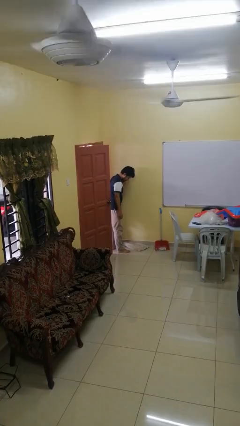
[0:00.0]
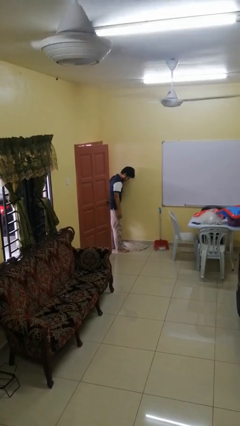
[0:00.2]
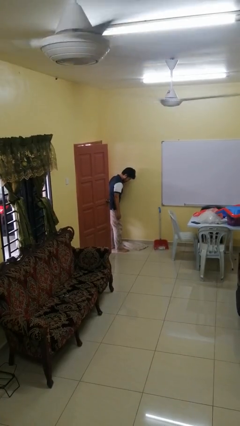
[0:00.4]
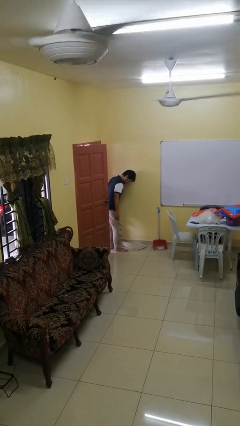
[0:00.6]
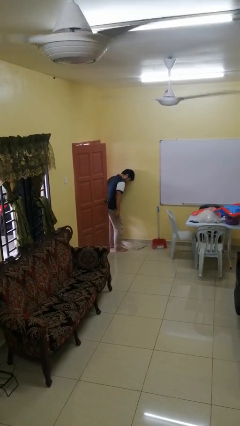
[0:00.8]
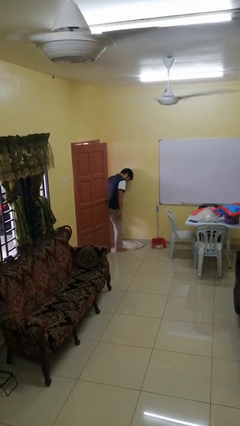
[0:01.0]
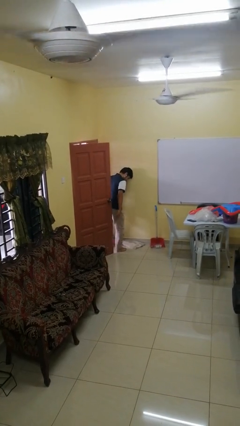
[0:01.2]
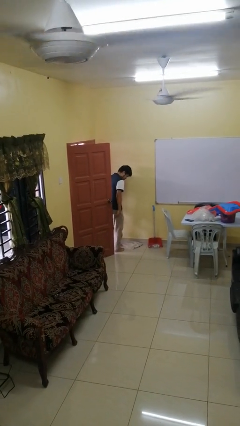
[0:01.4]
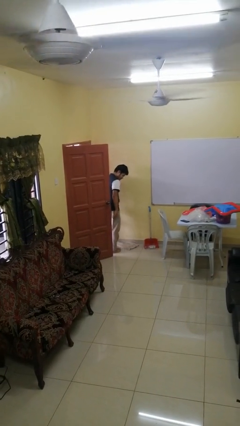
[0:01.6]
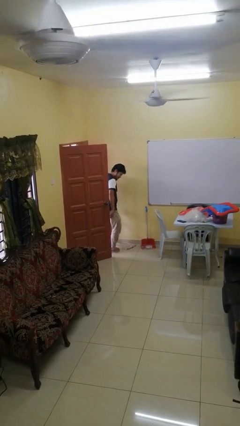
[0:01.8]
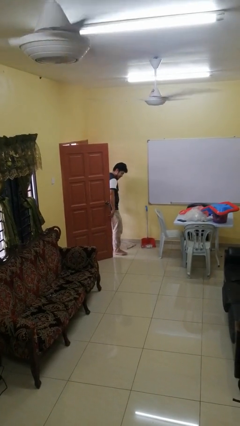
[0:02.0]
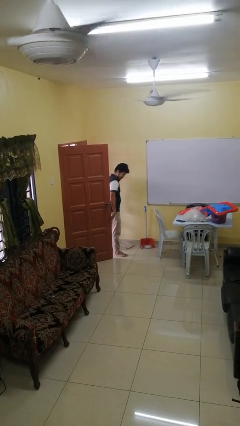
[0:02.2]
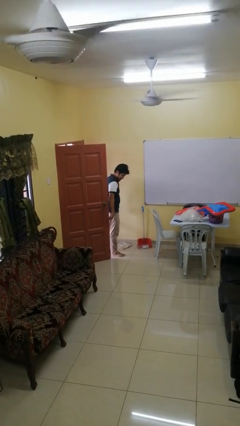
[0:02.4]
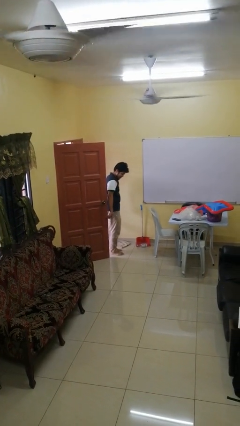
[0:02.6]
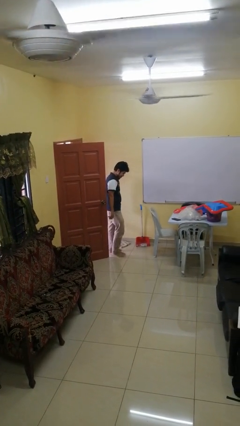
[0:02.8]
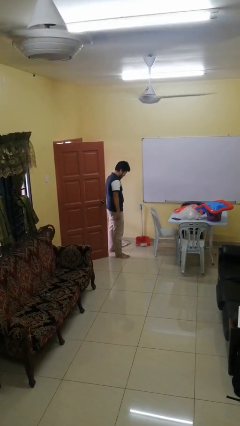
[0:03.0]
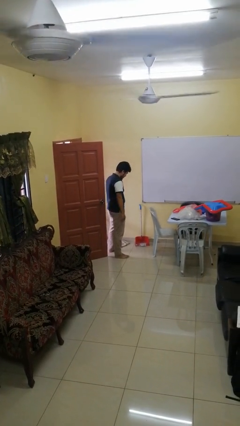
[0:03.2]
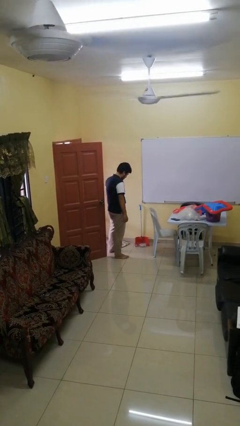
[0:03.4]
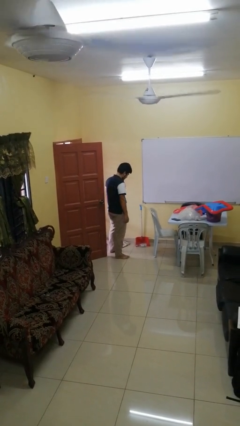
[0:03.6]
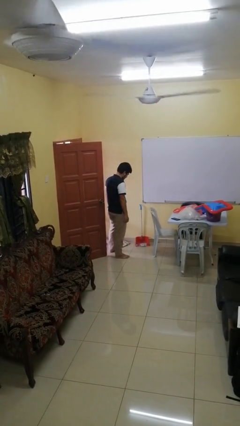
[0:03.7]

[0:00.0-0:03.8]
person opens facility door

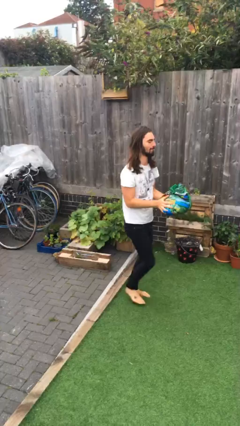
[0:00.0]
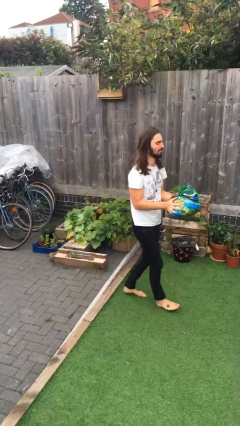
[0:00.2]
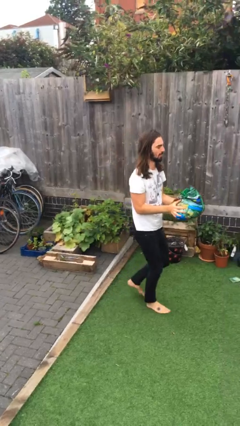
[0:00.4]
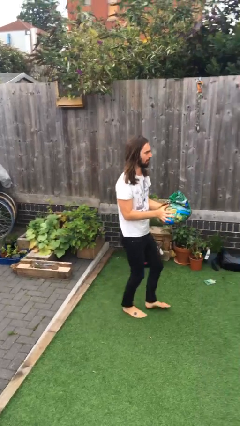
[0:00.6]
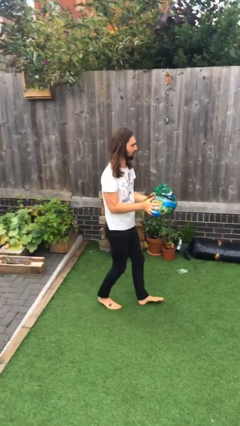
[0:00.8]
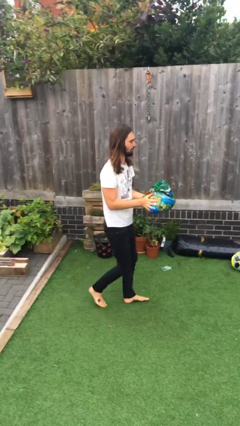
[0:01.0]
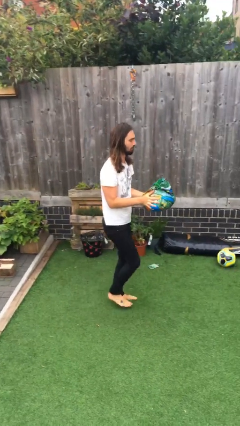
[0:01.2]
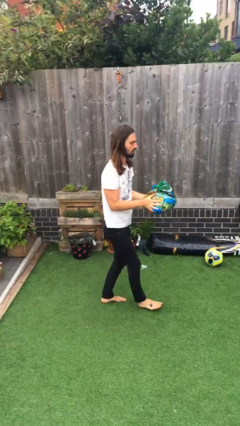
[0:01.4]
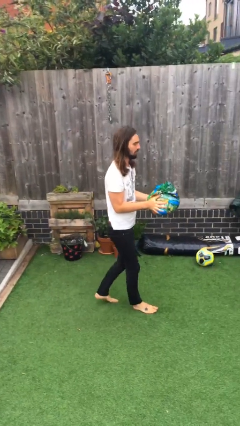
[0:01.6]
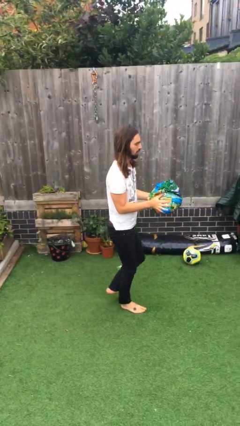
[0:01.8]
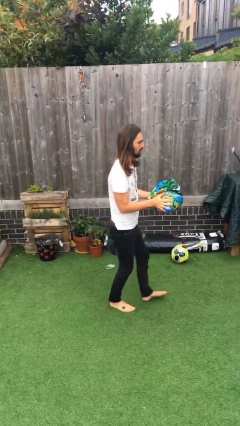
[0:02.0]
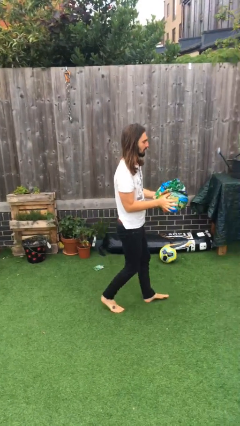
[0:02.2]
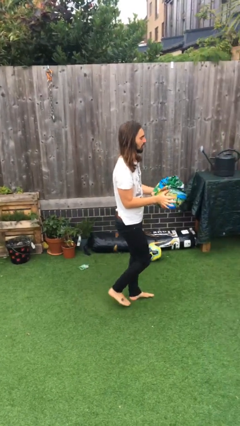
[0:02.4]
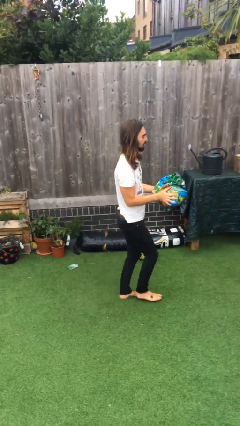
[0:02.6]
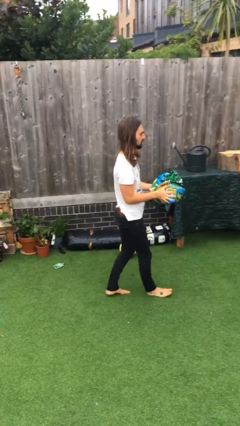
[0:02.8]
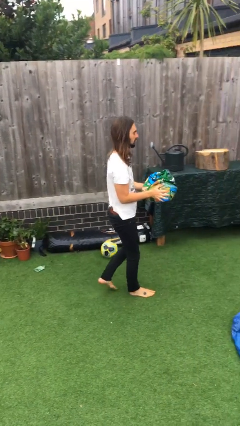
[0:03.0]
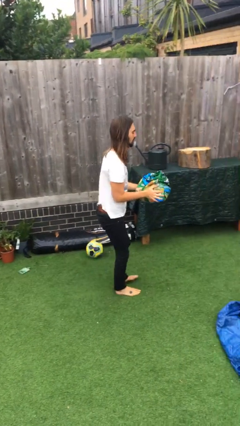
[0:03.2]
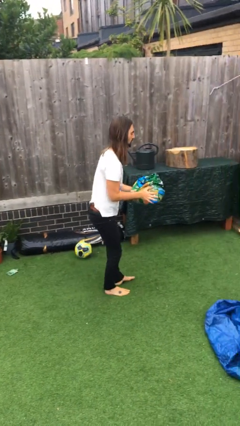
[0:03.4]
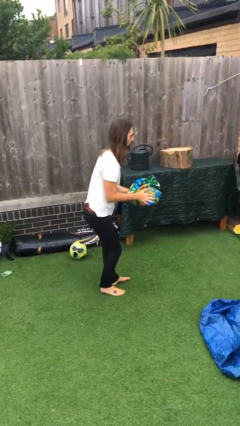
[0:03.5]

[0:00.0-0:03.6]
person carries heavy object

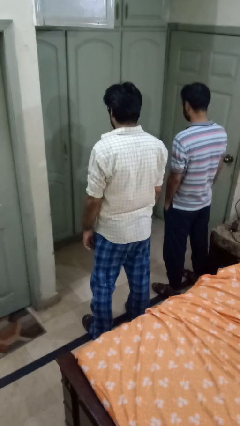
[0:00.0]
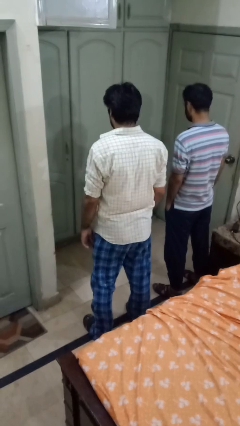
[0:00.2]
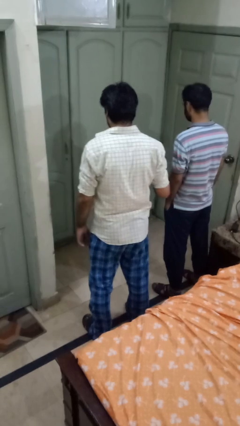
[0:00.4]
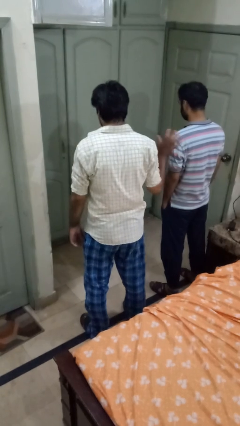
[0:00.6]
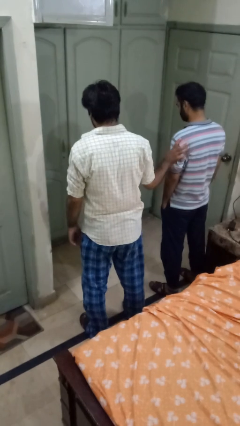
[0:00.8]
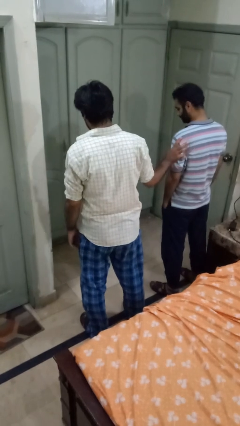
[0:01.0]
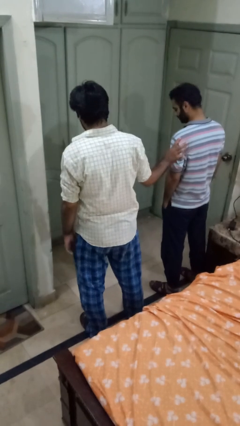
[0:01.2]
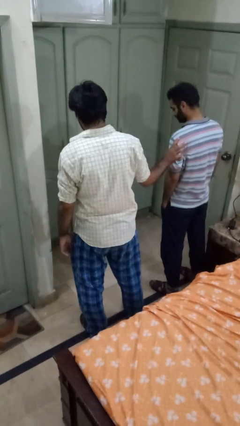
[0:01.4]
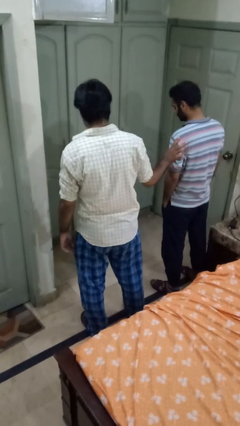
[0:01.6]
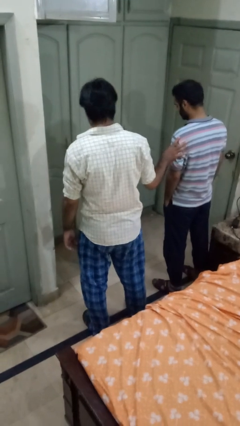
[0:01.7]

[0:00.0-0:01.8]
person grabs person by bicep

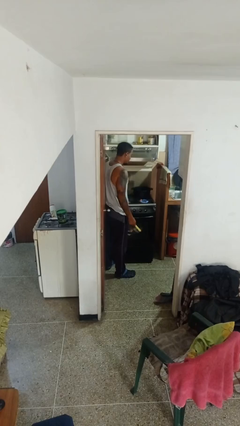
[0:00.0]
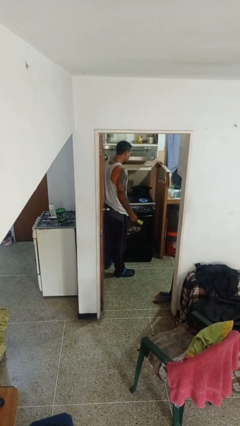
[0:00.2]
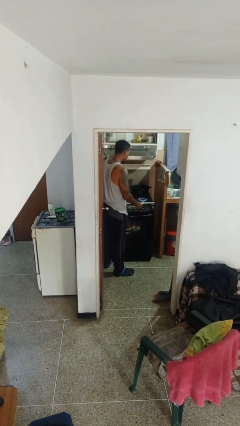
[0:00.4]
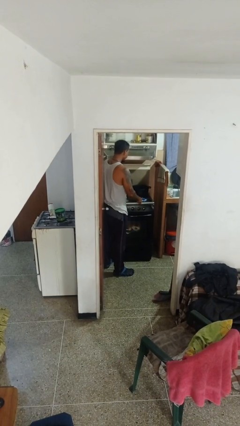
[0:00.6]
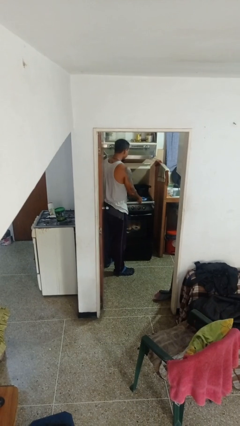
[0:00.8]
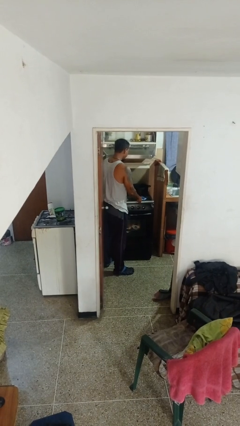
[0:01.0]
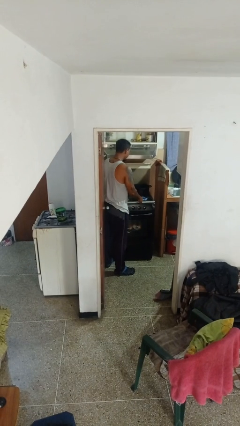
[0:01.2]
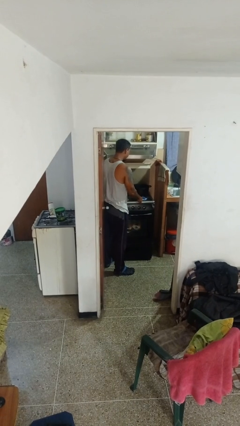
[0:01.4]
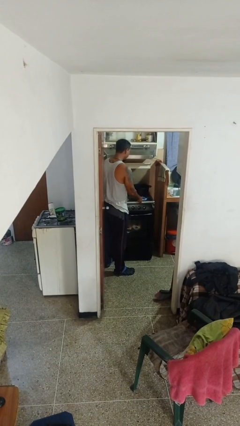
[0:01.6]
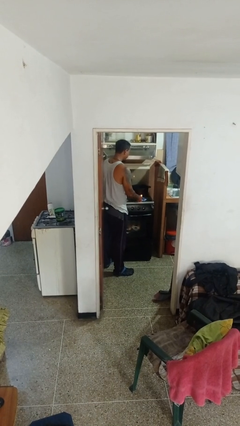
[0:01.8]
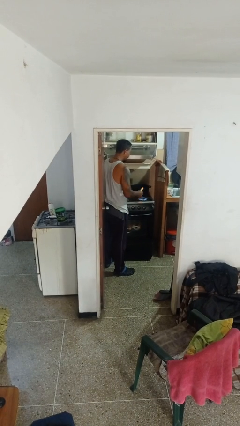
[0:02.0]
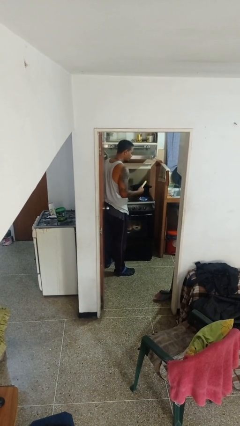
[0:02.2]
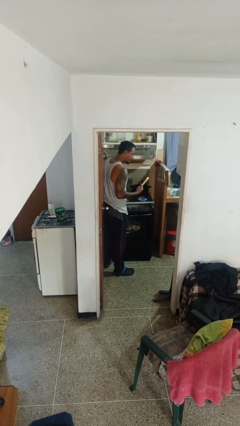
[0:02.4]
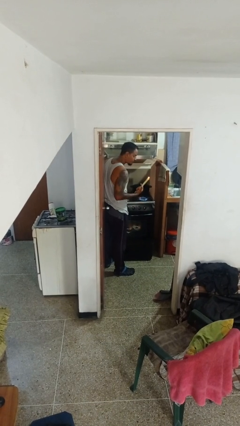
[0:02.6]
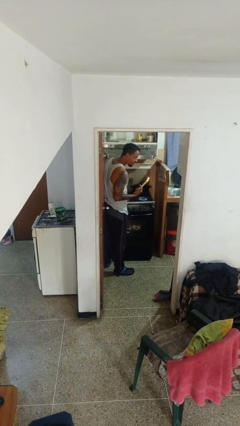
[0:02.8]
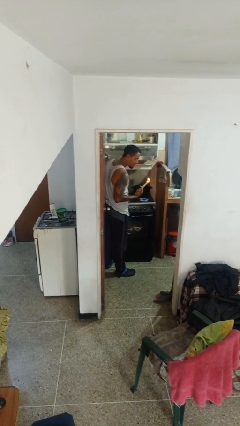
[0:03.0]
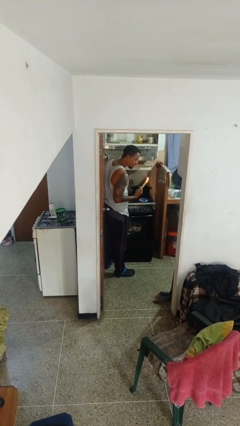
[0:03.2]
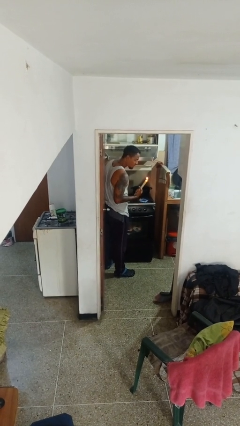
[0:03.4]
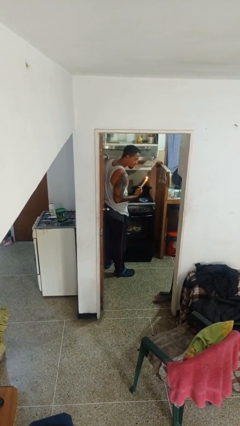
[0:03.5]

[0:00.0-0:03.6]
person lights candle

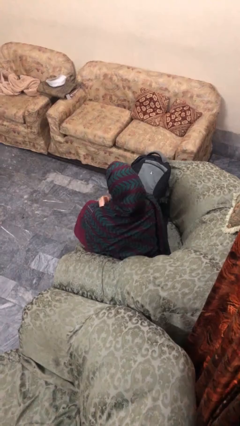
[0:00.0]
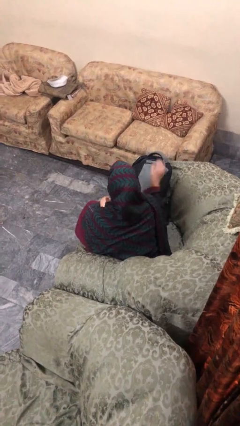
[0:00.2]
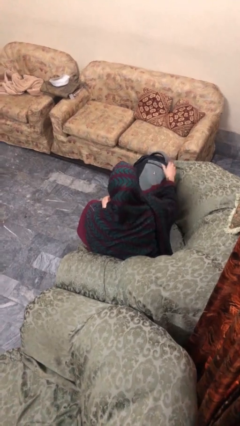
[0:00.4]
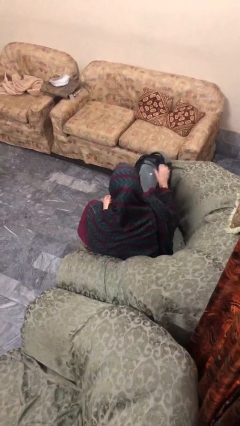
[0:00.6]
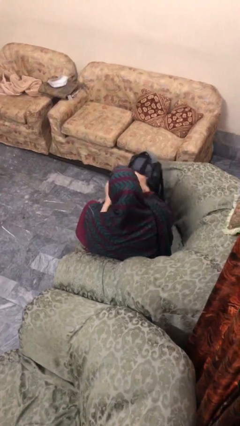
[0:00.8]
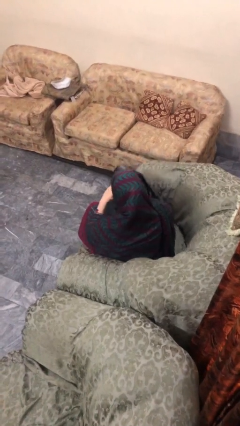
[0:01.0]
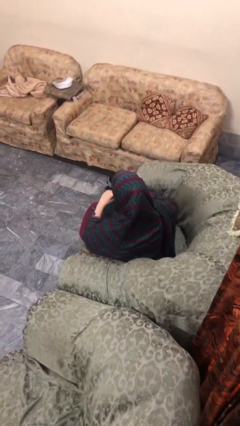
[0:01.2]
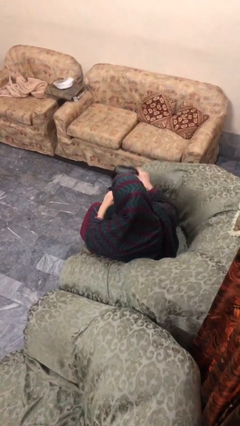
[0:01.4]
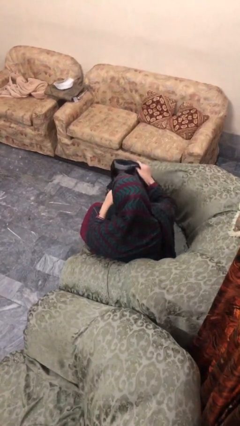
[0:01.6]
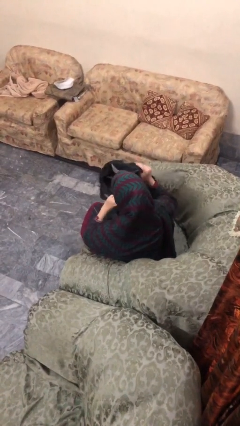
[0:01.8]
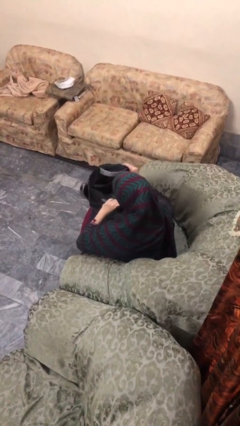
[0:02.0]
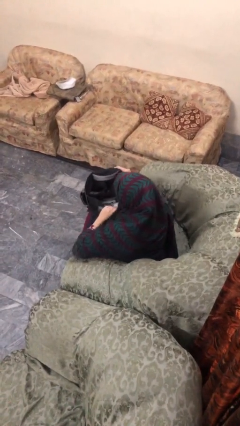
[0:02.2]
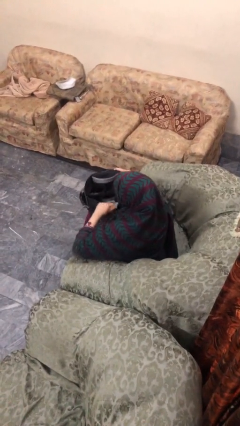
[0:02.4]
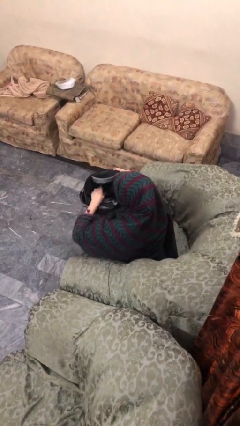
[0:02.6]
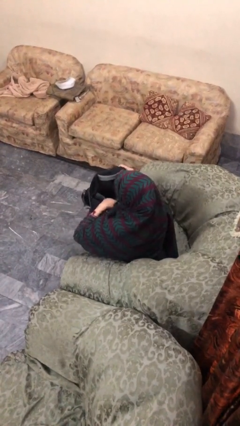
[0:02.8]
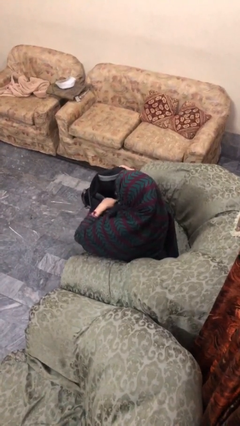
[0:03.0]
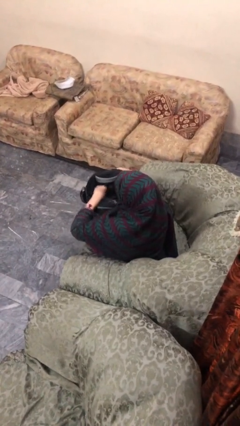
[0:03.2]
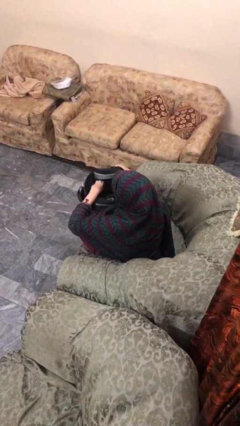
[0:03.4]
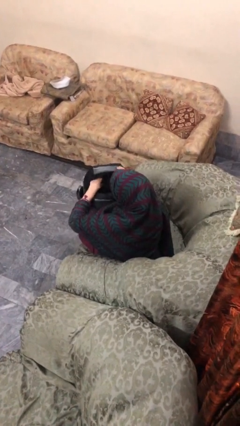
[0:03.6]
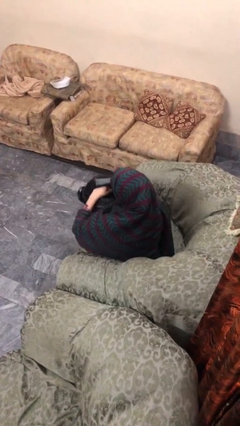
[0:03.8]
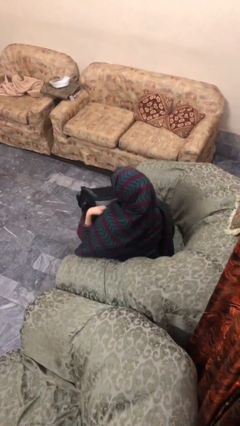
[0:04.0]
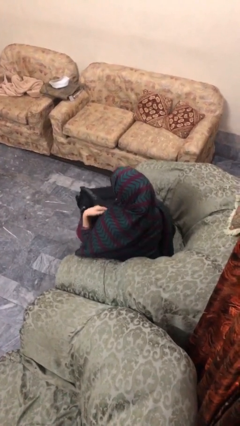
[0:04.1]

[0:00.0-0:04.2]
person searches in bag

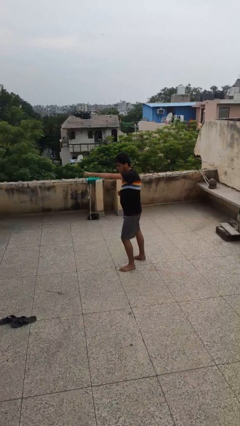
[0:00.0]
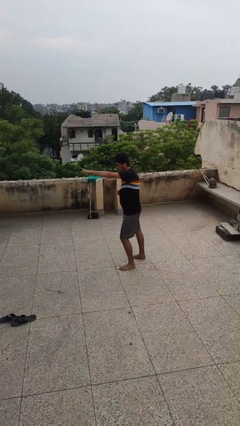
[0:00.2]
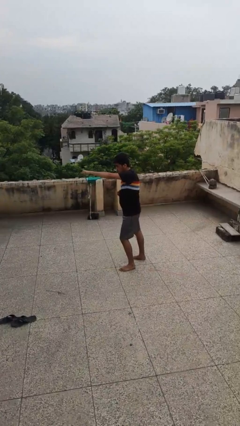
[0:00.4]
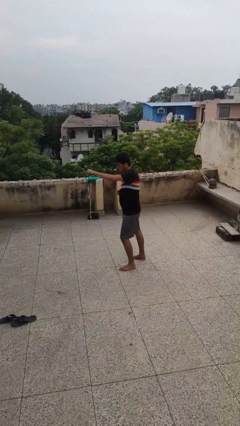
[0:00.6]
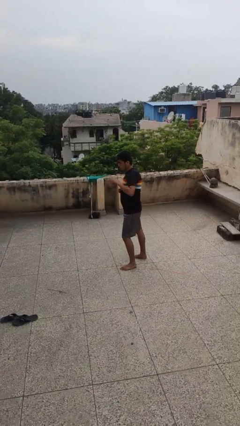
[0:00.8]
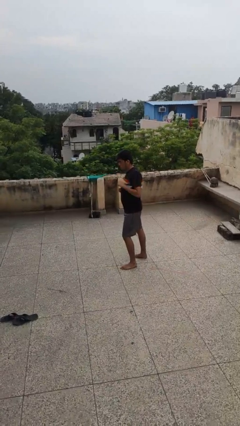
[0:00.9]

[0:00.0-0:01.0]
person punches
